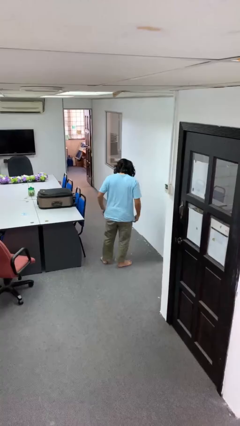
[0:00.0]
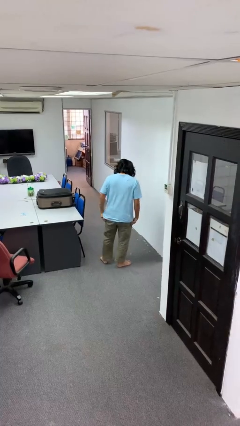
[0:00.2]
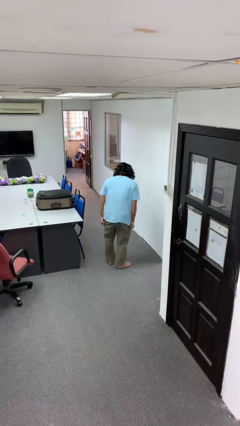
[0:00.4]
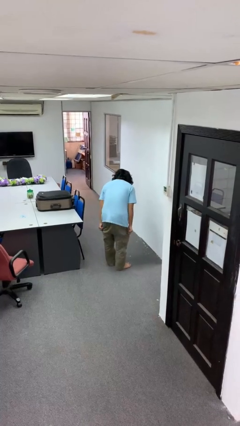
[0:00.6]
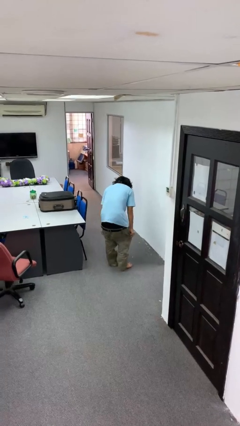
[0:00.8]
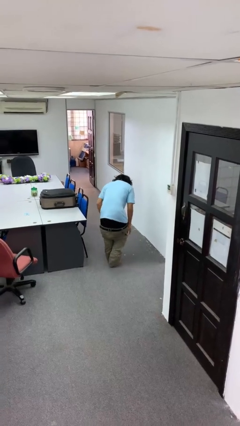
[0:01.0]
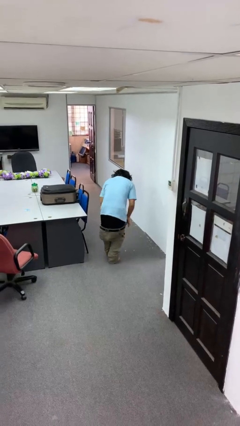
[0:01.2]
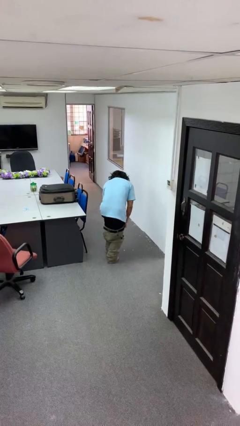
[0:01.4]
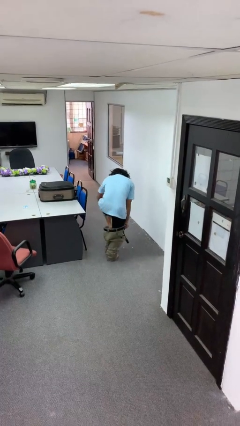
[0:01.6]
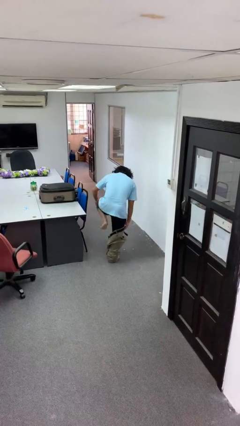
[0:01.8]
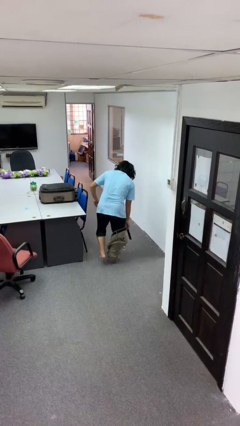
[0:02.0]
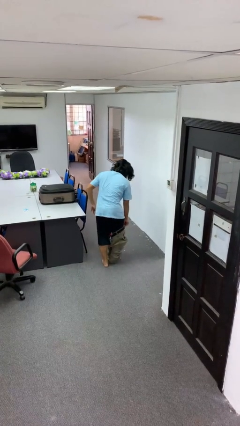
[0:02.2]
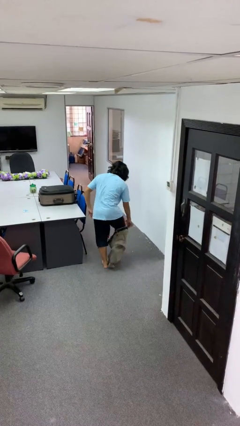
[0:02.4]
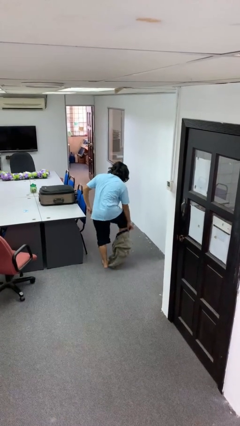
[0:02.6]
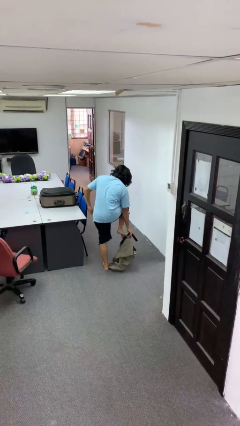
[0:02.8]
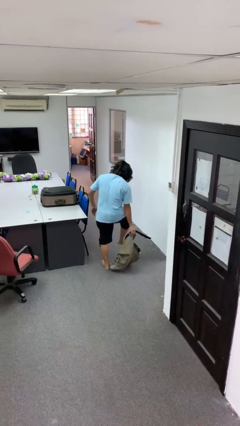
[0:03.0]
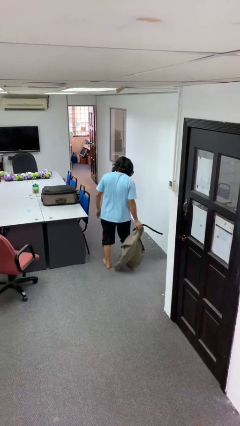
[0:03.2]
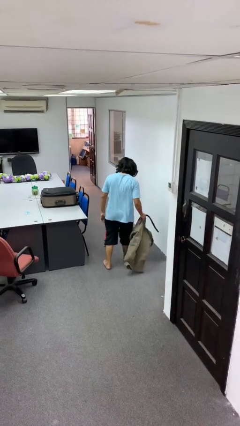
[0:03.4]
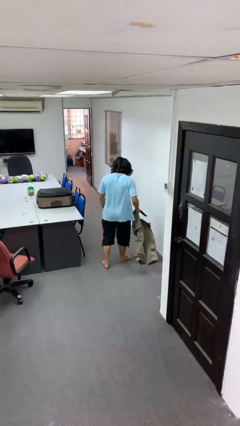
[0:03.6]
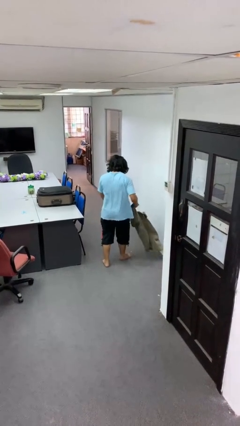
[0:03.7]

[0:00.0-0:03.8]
person puts on pants

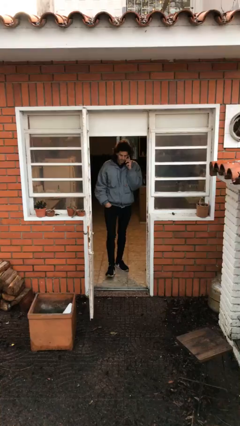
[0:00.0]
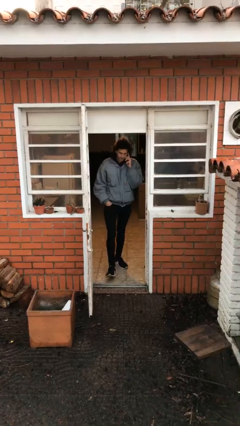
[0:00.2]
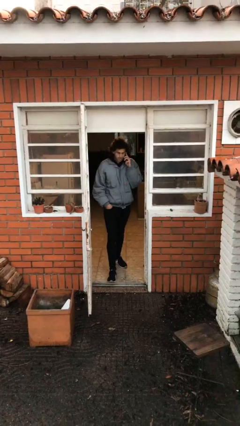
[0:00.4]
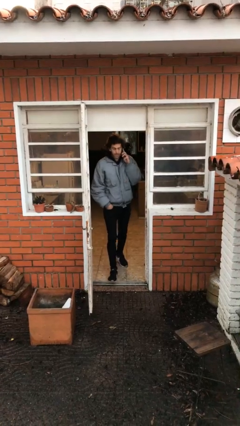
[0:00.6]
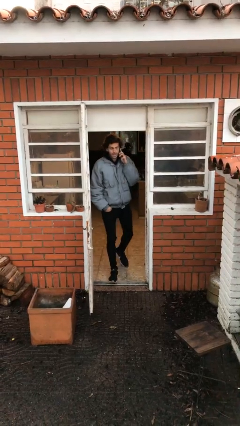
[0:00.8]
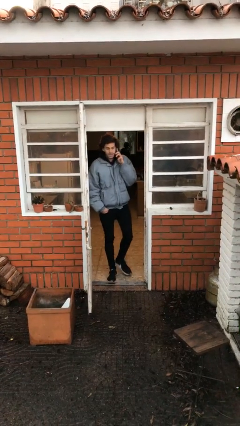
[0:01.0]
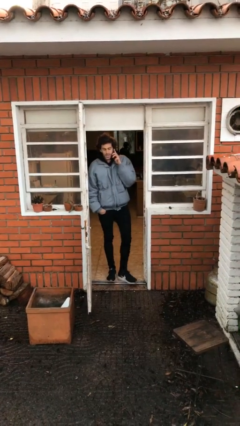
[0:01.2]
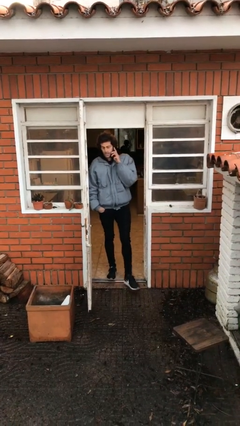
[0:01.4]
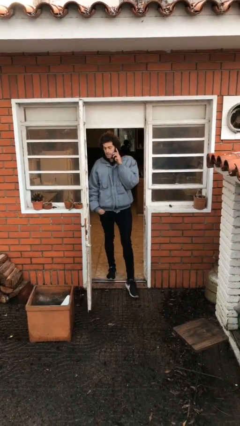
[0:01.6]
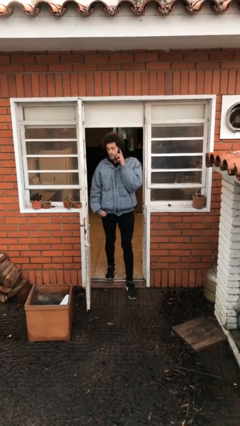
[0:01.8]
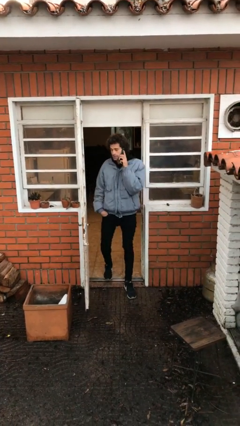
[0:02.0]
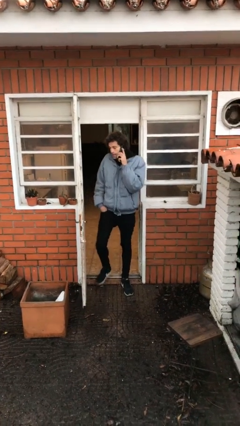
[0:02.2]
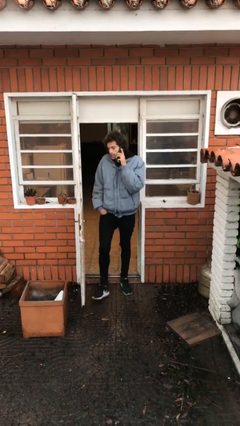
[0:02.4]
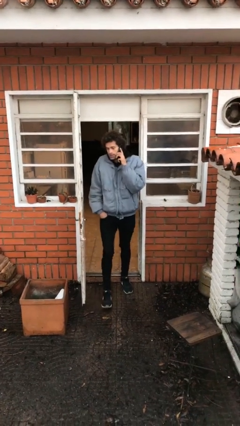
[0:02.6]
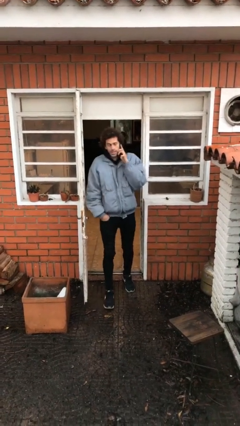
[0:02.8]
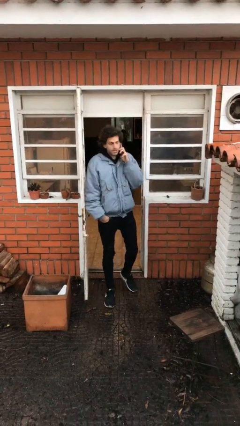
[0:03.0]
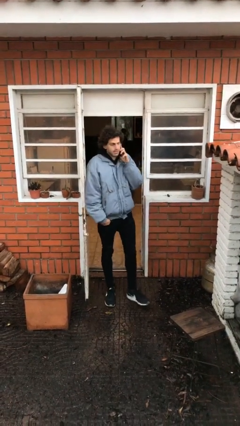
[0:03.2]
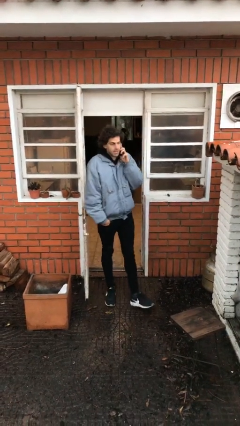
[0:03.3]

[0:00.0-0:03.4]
person enters scene through structure

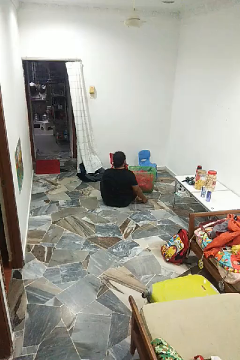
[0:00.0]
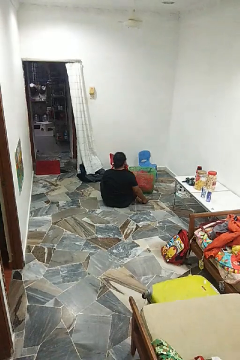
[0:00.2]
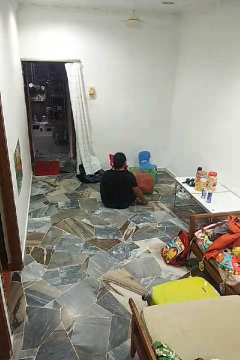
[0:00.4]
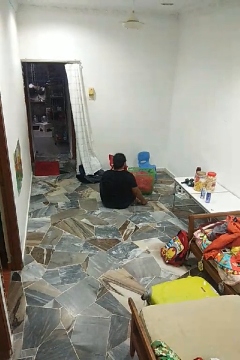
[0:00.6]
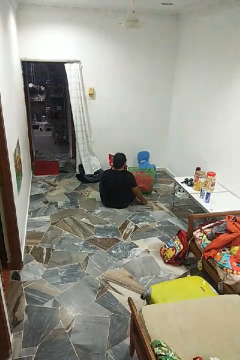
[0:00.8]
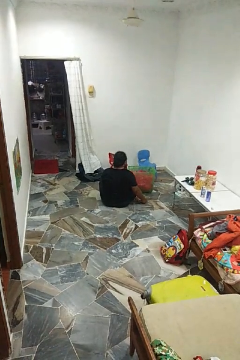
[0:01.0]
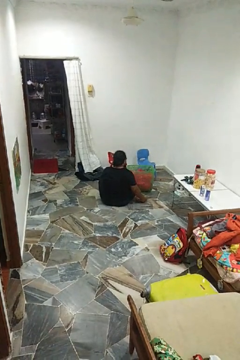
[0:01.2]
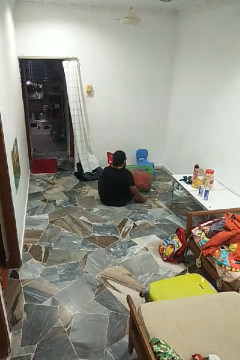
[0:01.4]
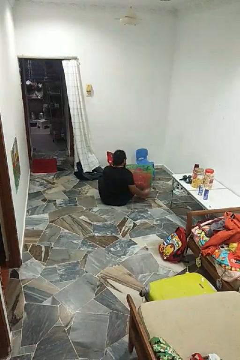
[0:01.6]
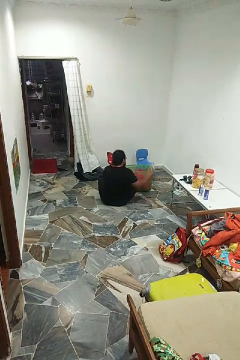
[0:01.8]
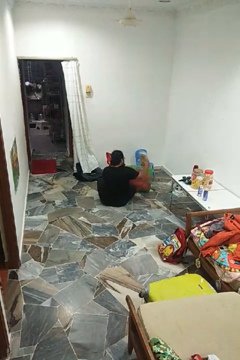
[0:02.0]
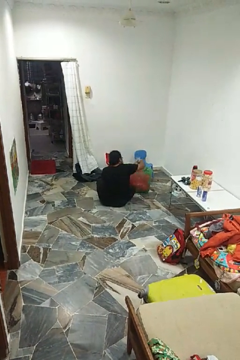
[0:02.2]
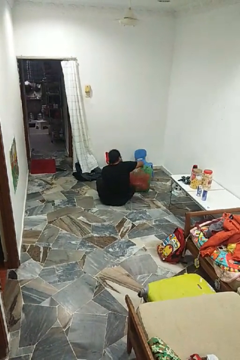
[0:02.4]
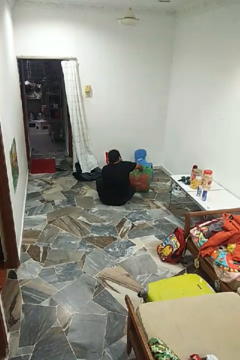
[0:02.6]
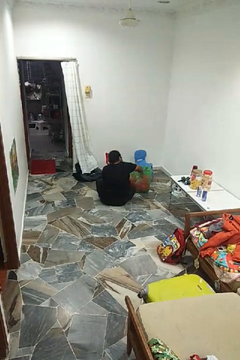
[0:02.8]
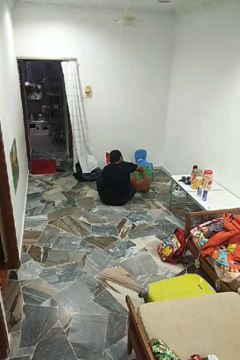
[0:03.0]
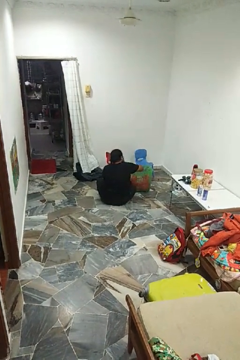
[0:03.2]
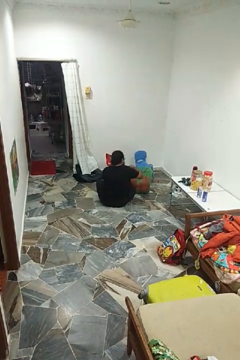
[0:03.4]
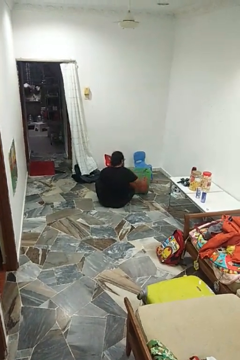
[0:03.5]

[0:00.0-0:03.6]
person puts object into basket

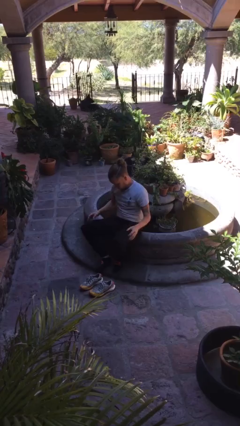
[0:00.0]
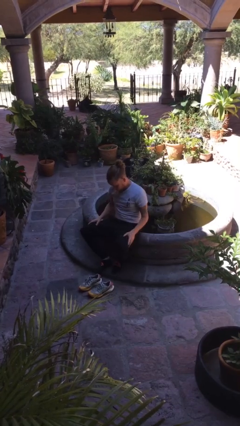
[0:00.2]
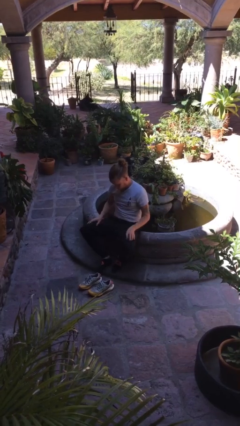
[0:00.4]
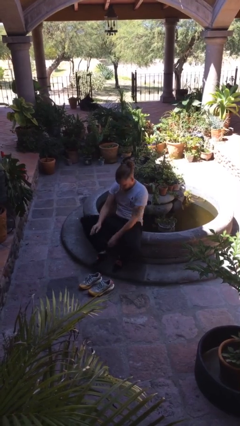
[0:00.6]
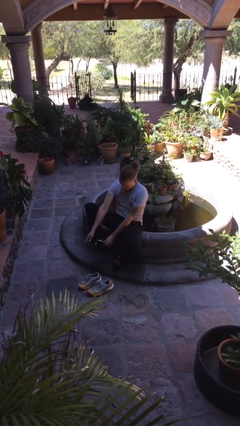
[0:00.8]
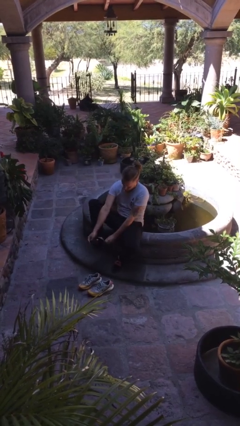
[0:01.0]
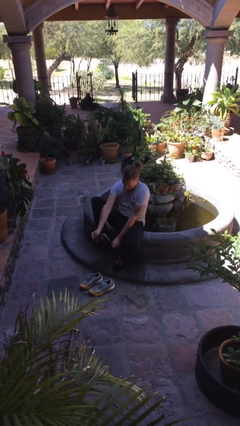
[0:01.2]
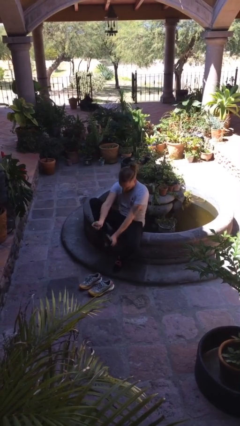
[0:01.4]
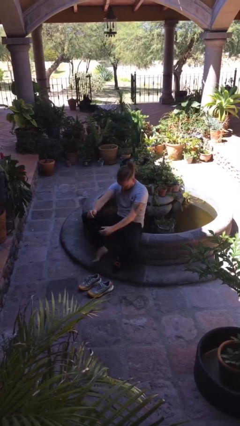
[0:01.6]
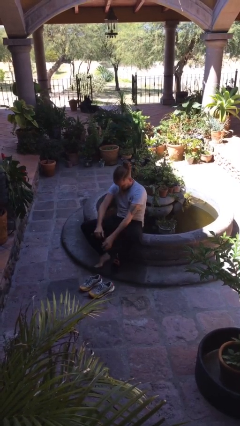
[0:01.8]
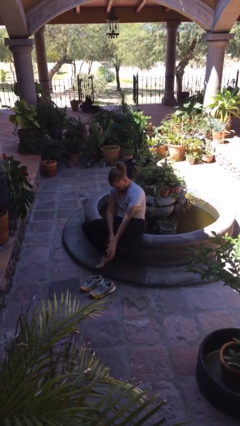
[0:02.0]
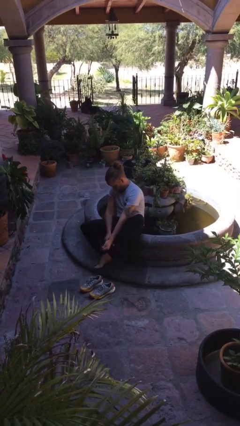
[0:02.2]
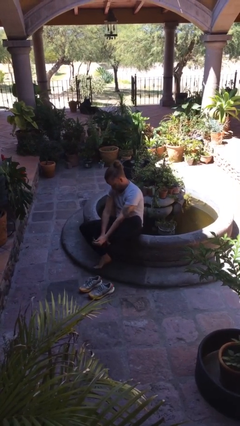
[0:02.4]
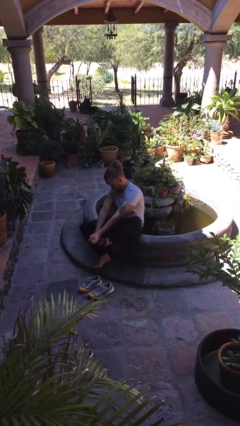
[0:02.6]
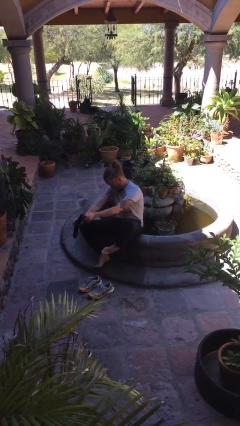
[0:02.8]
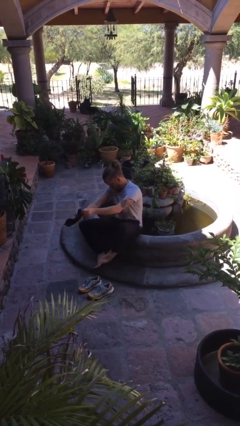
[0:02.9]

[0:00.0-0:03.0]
person takes off socks

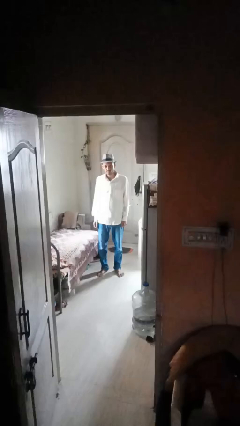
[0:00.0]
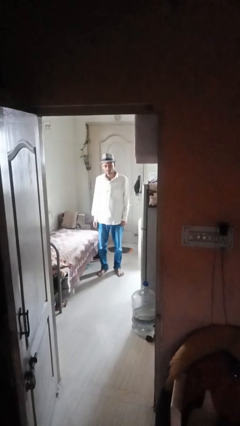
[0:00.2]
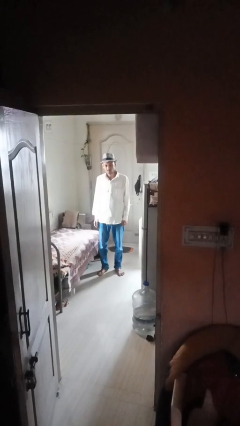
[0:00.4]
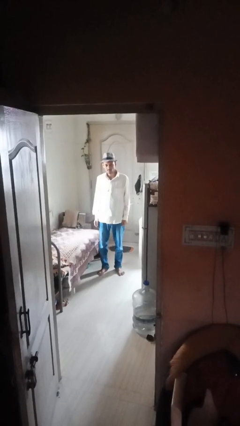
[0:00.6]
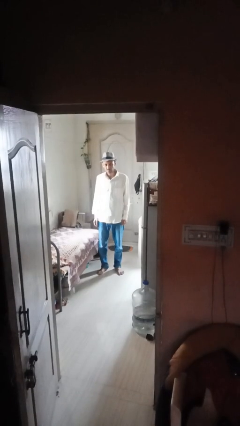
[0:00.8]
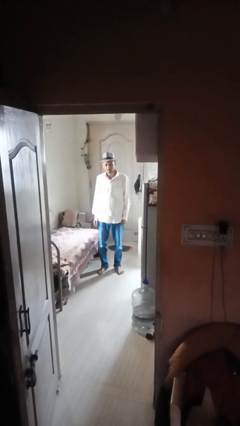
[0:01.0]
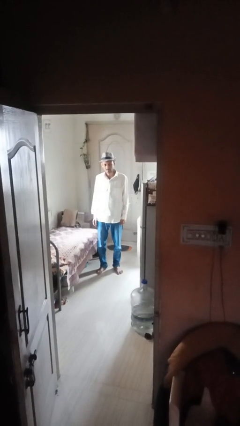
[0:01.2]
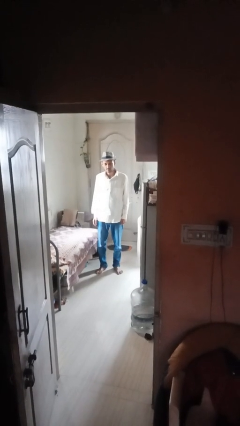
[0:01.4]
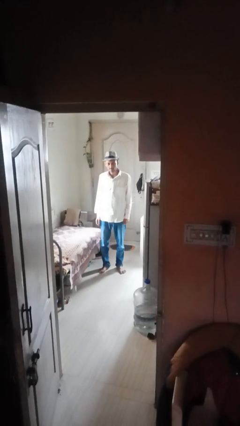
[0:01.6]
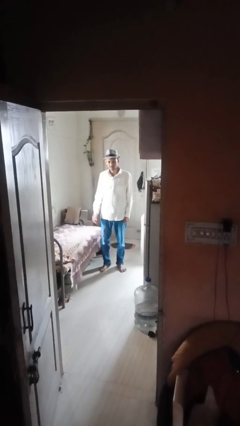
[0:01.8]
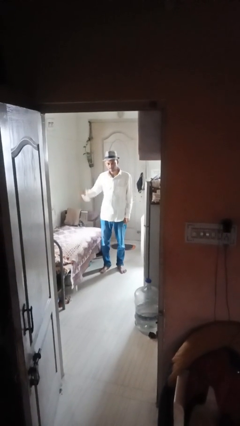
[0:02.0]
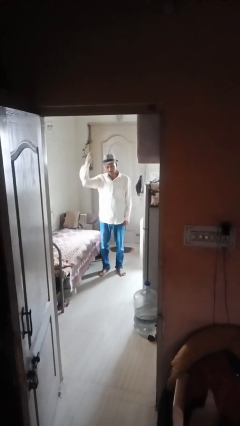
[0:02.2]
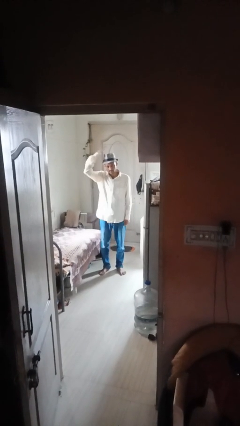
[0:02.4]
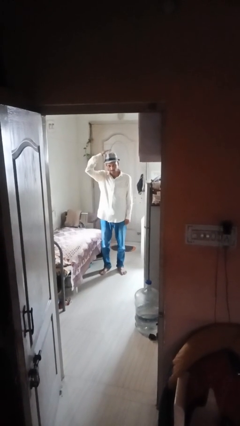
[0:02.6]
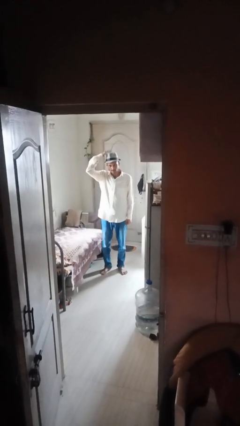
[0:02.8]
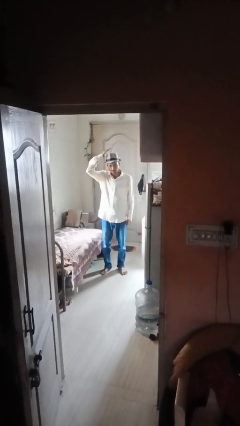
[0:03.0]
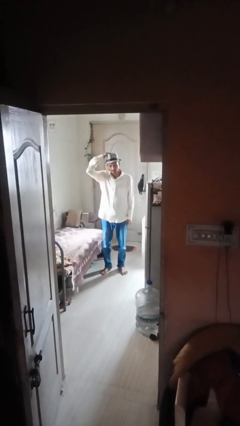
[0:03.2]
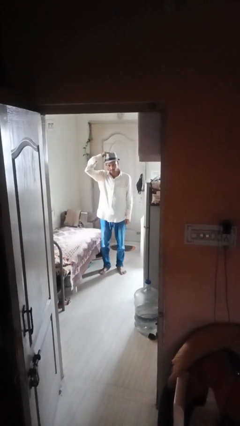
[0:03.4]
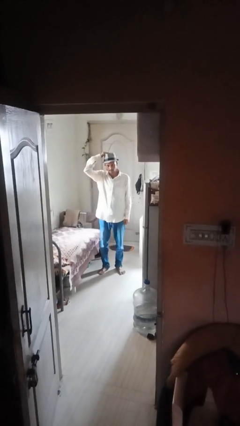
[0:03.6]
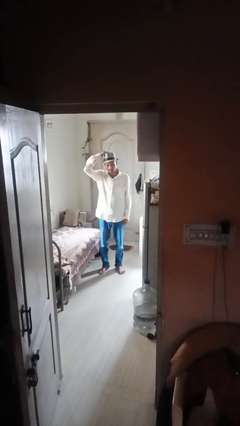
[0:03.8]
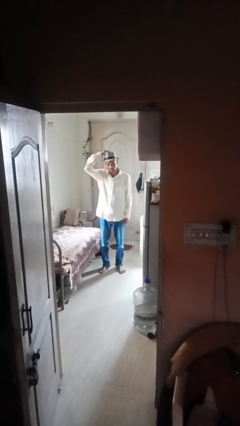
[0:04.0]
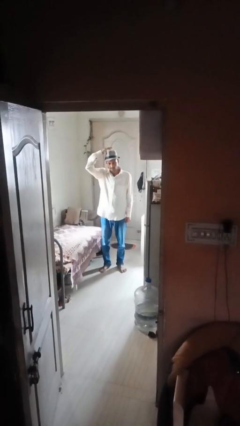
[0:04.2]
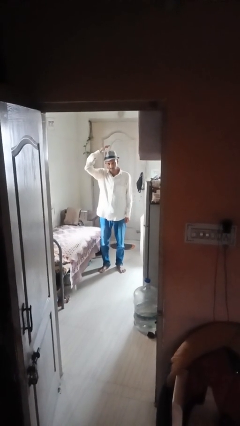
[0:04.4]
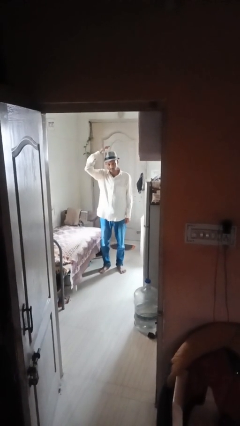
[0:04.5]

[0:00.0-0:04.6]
person pats head
